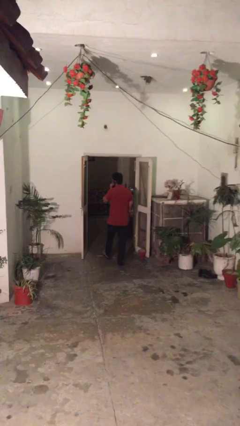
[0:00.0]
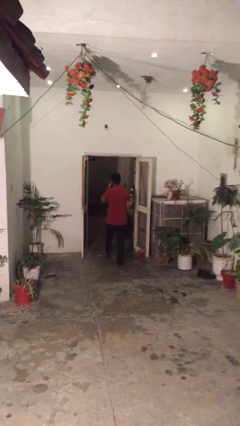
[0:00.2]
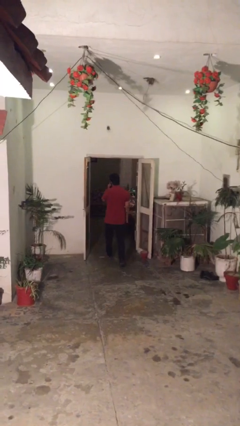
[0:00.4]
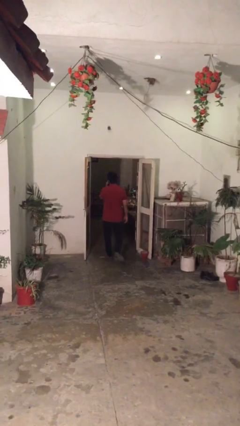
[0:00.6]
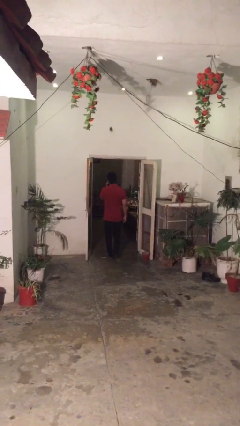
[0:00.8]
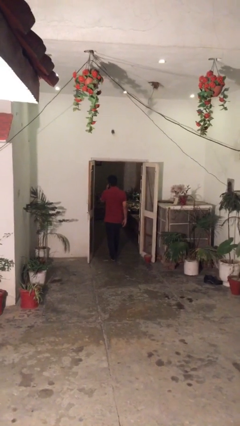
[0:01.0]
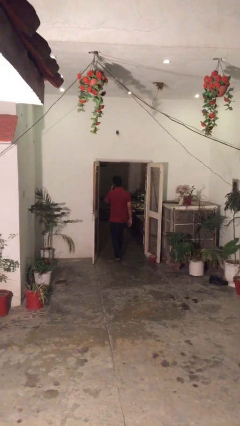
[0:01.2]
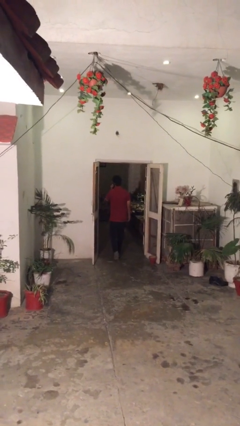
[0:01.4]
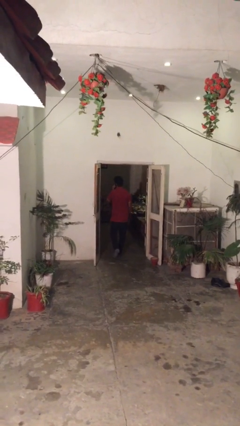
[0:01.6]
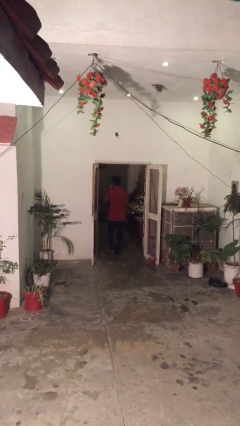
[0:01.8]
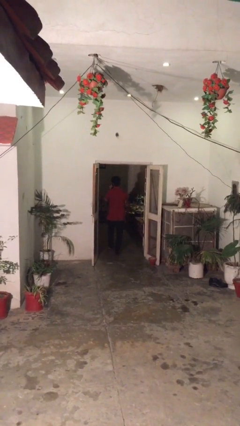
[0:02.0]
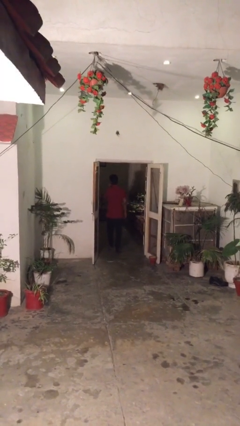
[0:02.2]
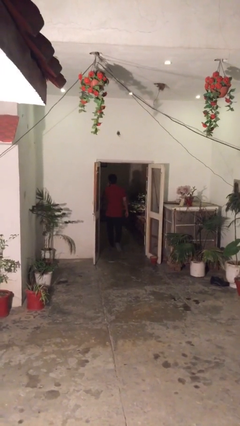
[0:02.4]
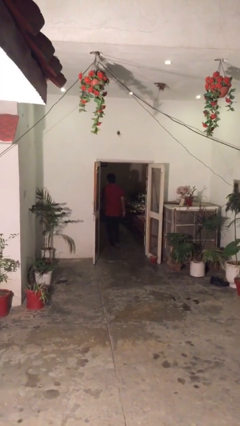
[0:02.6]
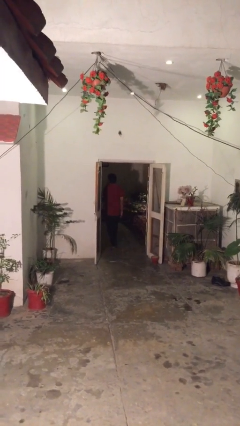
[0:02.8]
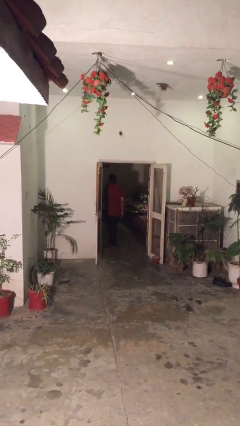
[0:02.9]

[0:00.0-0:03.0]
person exits scene through structure

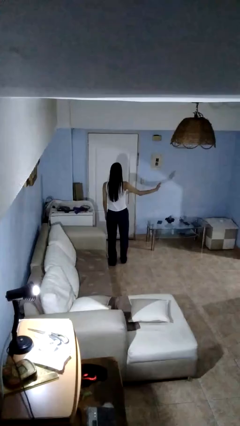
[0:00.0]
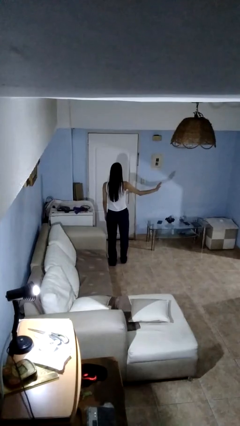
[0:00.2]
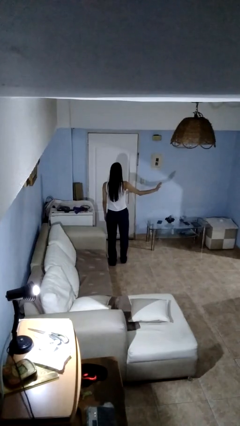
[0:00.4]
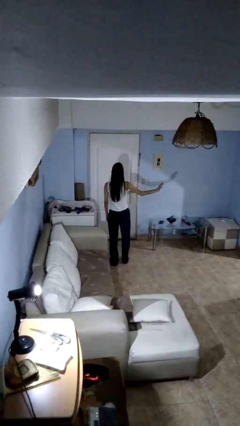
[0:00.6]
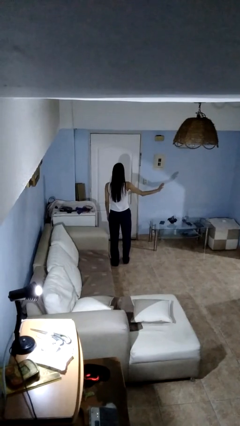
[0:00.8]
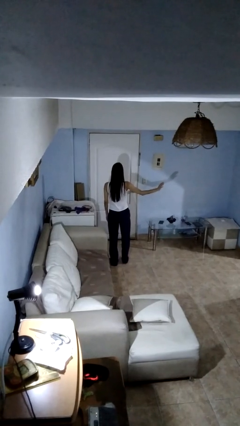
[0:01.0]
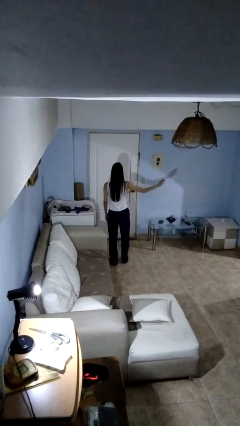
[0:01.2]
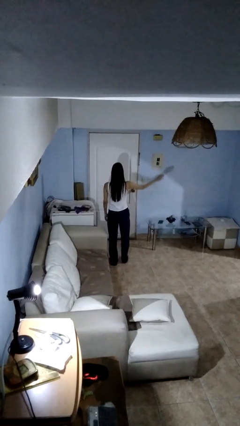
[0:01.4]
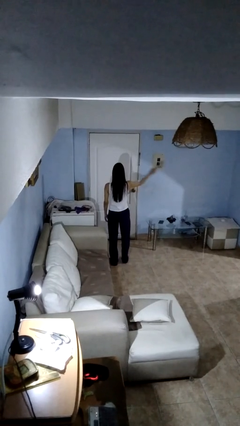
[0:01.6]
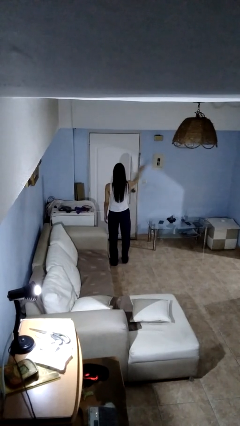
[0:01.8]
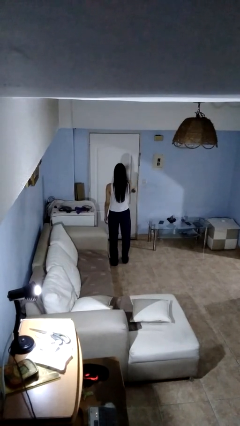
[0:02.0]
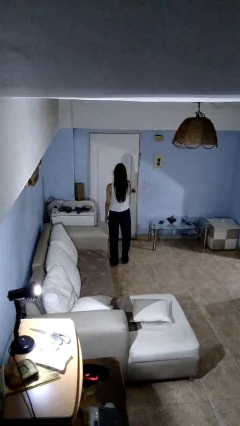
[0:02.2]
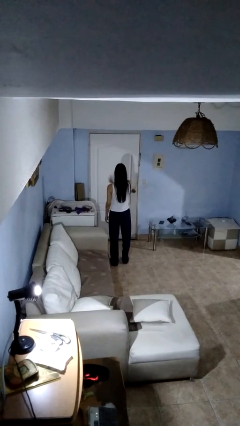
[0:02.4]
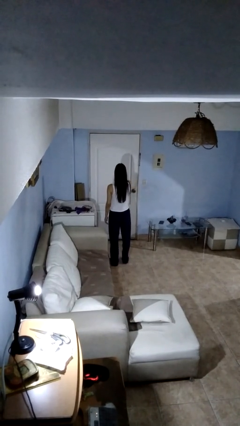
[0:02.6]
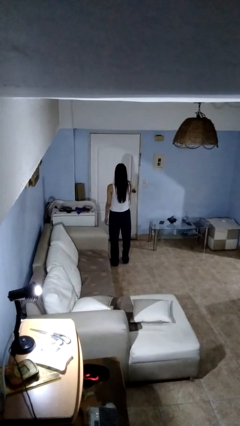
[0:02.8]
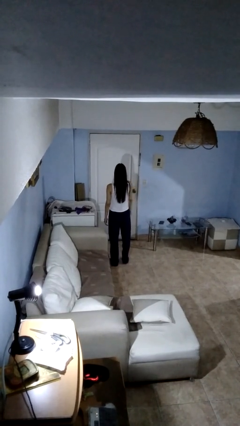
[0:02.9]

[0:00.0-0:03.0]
person gestures swipe right

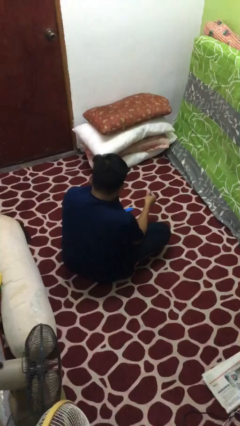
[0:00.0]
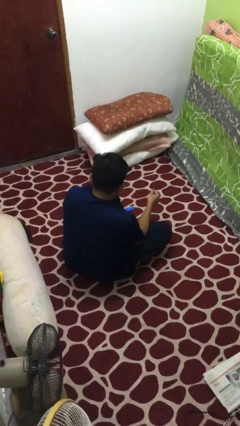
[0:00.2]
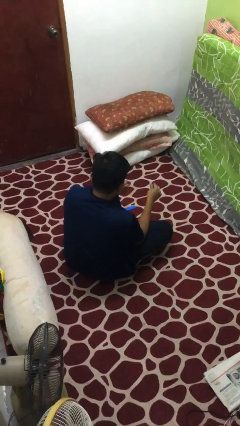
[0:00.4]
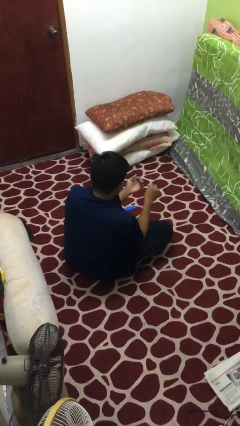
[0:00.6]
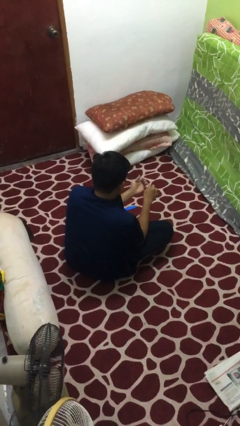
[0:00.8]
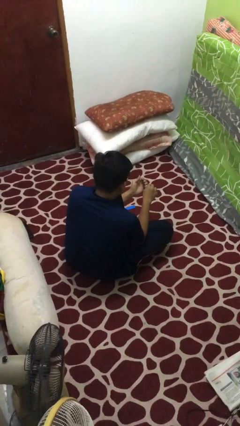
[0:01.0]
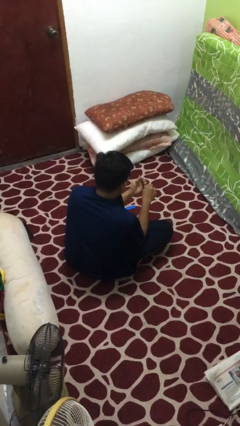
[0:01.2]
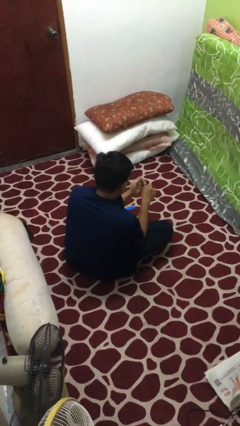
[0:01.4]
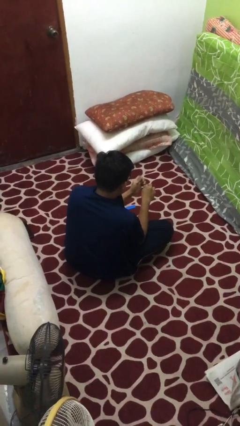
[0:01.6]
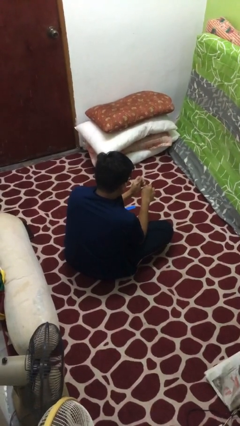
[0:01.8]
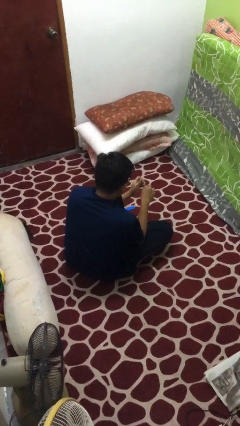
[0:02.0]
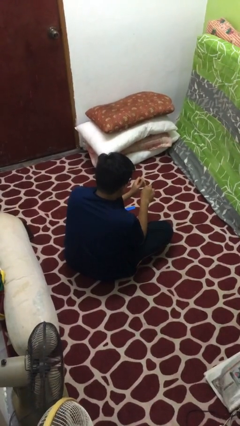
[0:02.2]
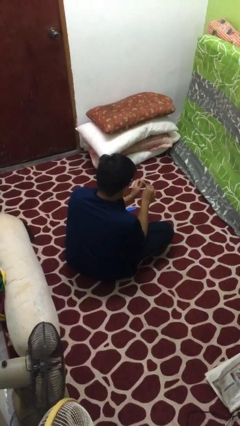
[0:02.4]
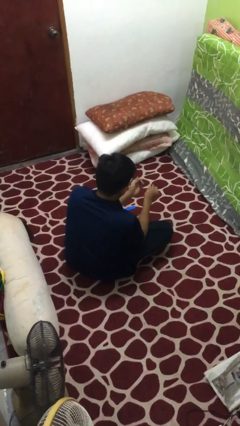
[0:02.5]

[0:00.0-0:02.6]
person clips fingernails

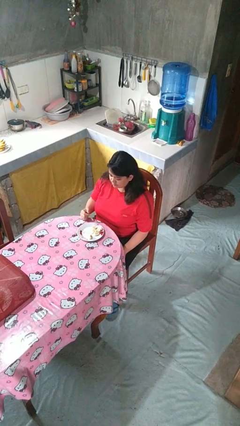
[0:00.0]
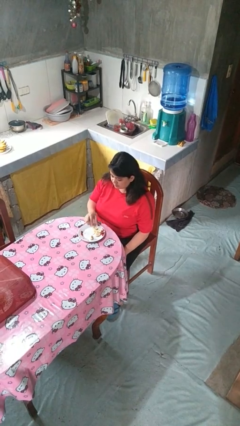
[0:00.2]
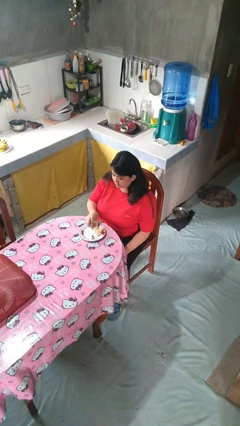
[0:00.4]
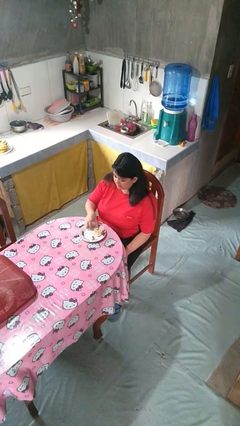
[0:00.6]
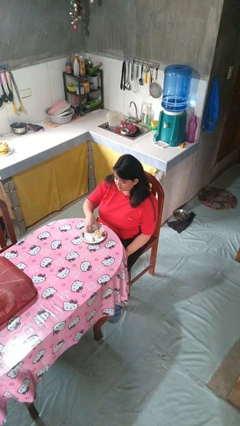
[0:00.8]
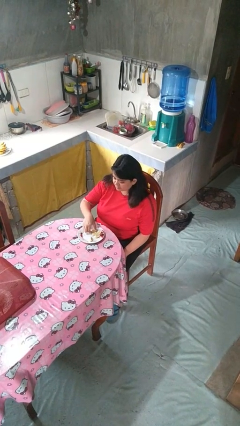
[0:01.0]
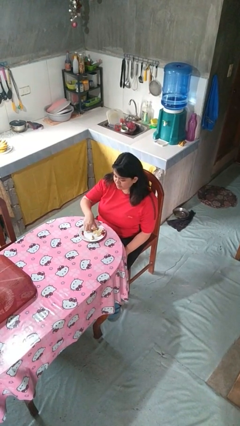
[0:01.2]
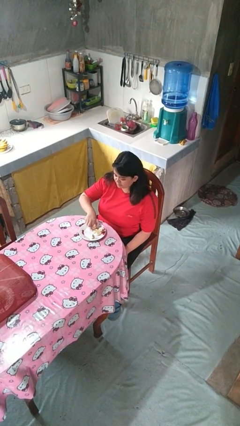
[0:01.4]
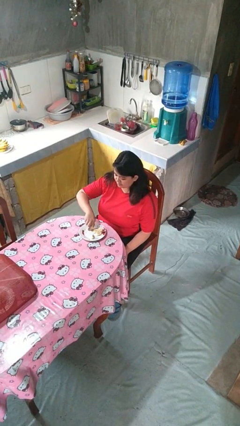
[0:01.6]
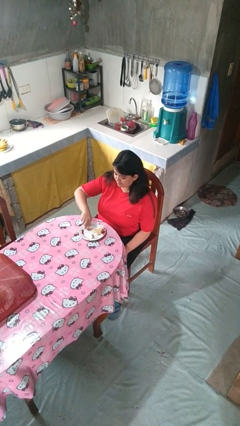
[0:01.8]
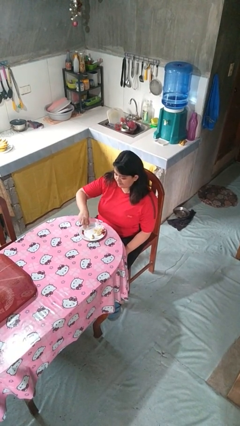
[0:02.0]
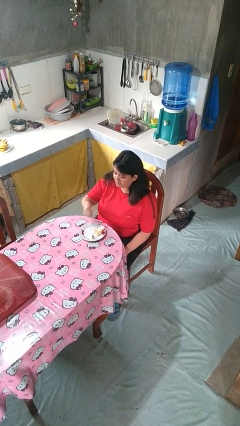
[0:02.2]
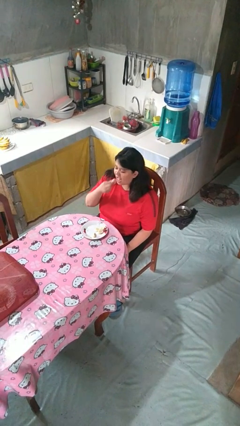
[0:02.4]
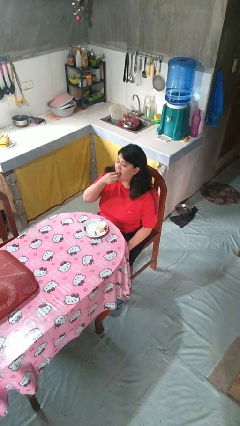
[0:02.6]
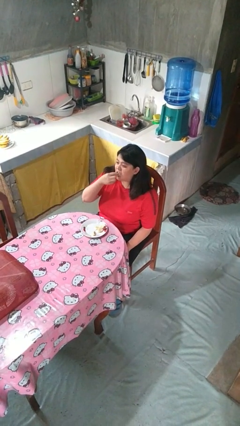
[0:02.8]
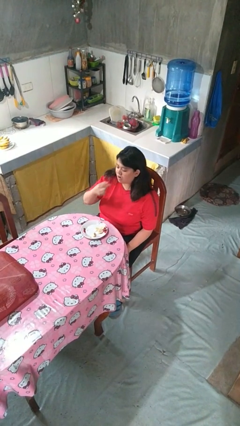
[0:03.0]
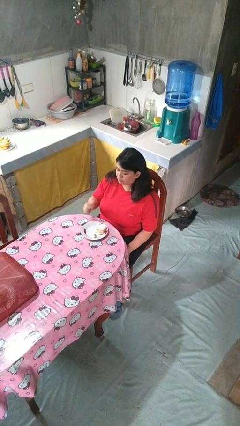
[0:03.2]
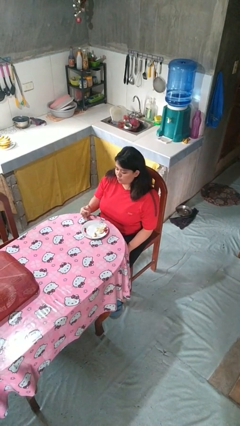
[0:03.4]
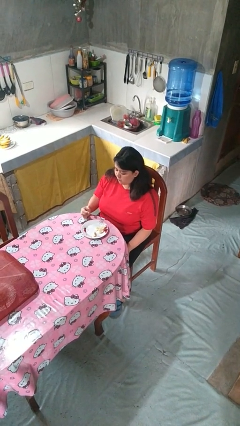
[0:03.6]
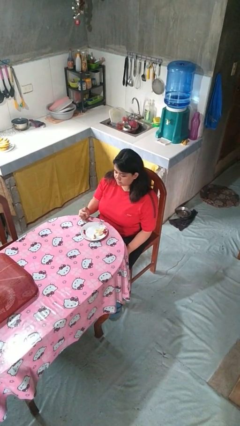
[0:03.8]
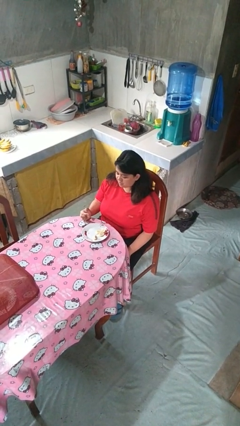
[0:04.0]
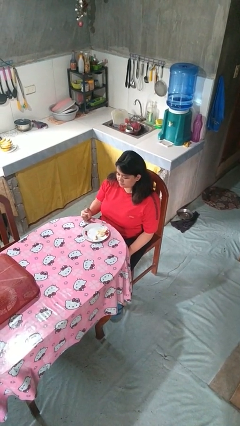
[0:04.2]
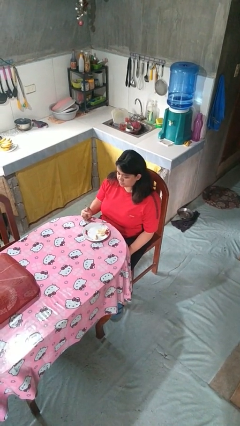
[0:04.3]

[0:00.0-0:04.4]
person eats with hands

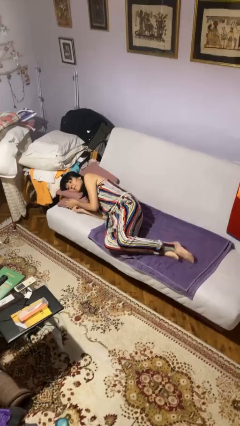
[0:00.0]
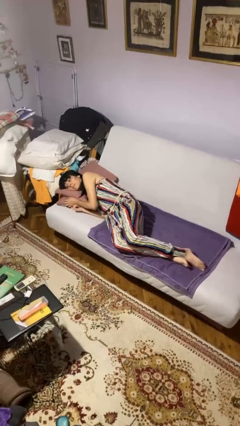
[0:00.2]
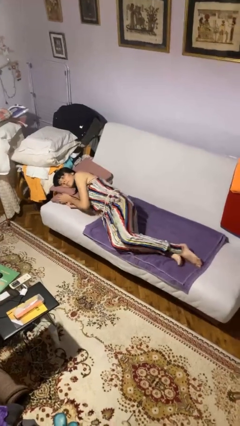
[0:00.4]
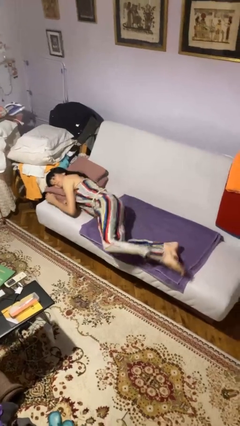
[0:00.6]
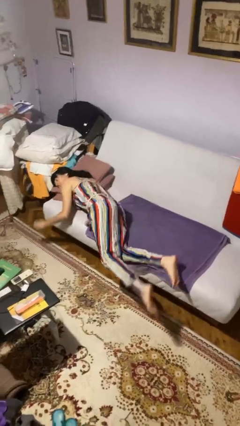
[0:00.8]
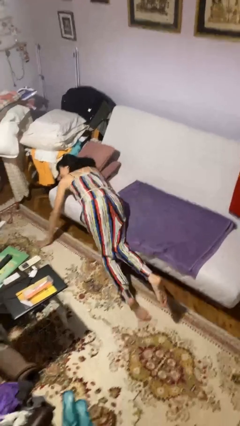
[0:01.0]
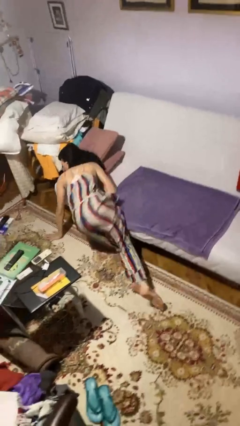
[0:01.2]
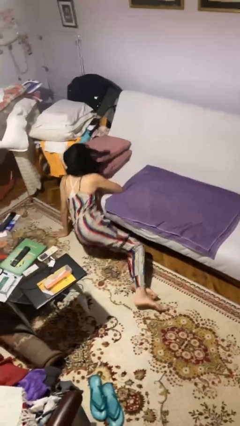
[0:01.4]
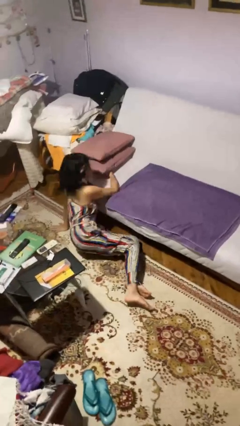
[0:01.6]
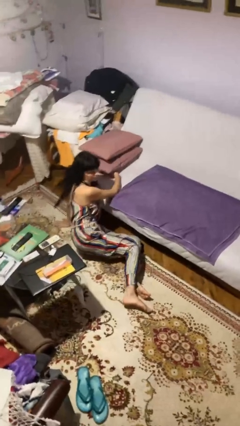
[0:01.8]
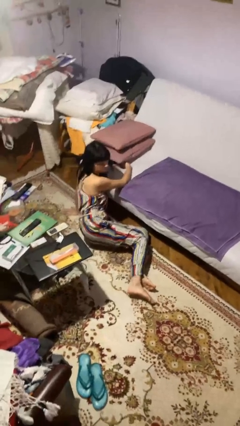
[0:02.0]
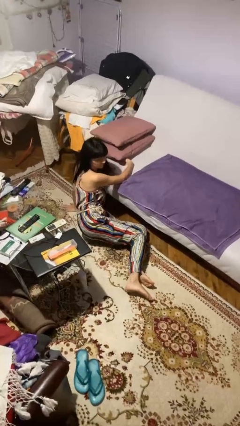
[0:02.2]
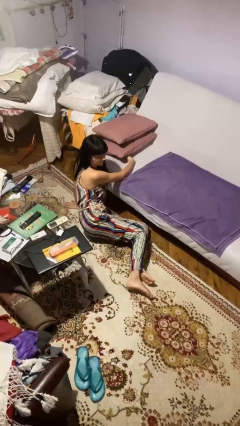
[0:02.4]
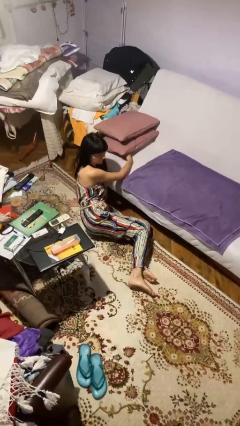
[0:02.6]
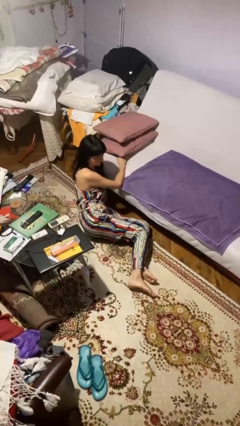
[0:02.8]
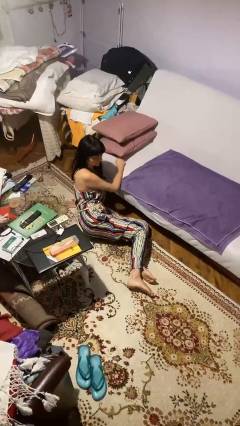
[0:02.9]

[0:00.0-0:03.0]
person falls from bed

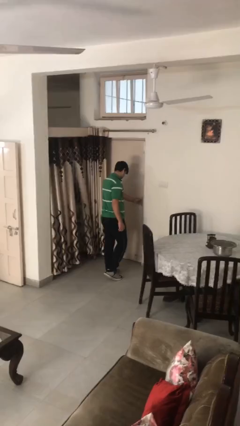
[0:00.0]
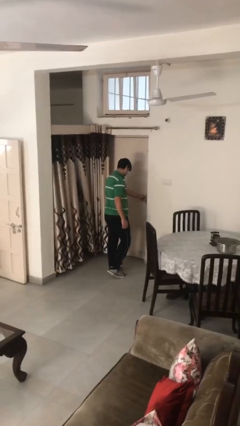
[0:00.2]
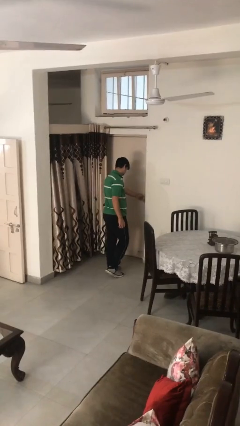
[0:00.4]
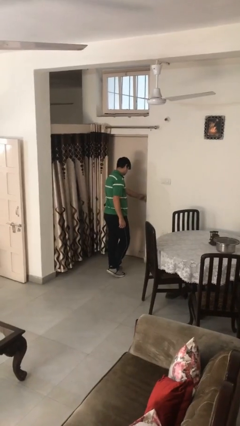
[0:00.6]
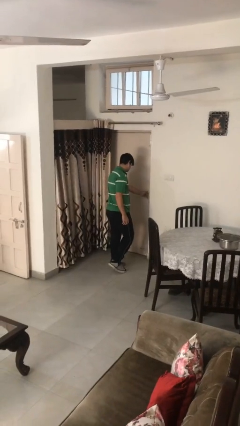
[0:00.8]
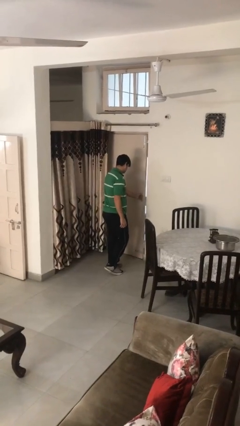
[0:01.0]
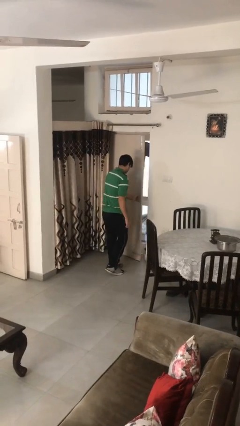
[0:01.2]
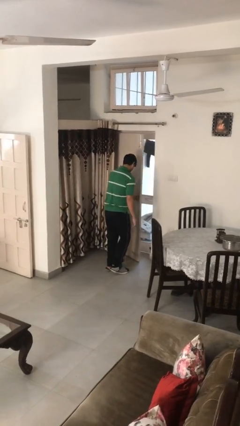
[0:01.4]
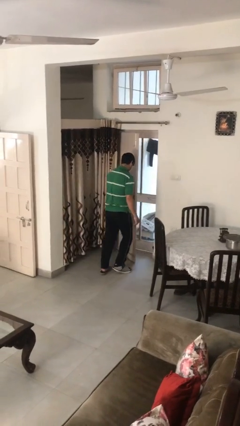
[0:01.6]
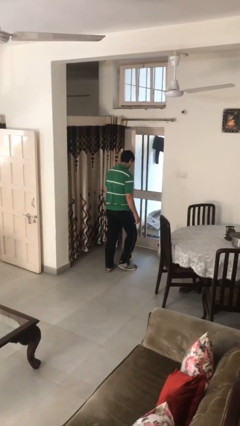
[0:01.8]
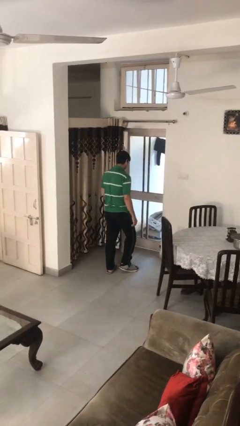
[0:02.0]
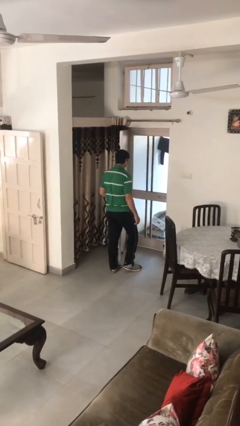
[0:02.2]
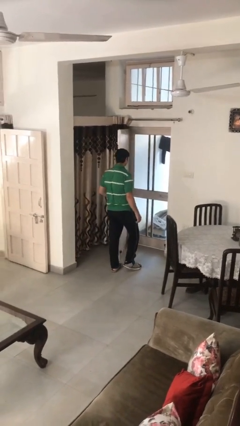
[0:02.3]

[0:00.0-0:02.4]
person opens facility door
